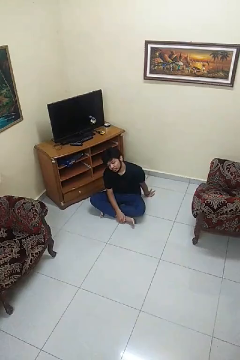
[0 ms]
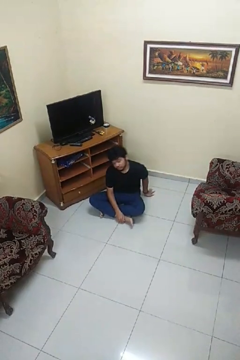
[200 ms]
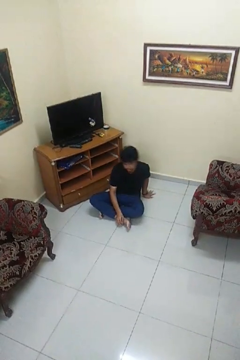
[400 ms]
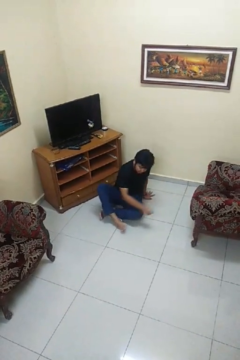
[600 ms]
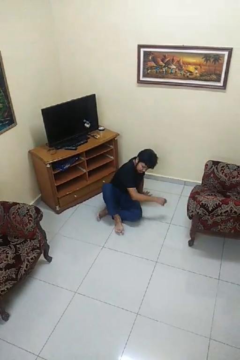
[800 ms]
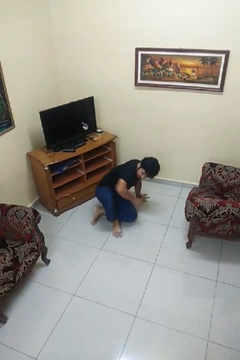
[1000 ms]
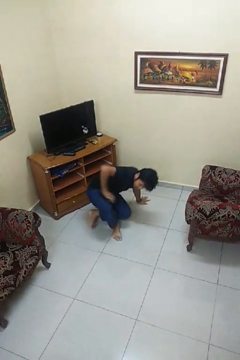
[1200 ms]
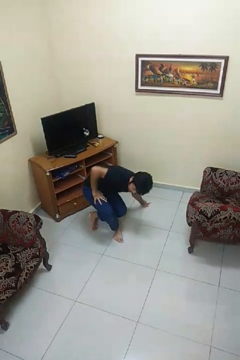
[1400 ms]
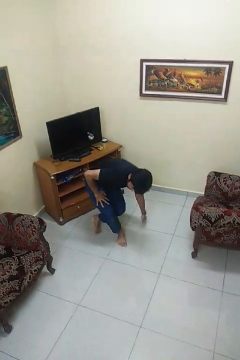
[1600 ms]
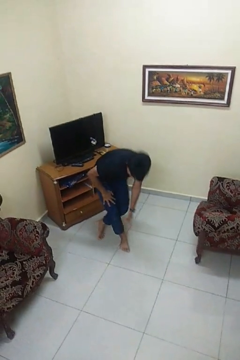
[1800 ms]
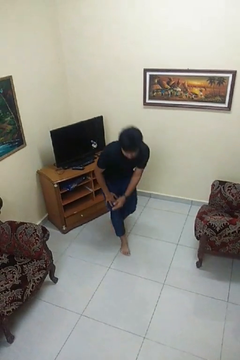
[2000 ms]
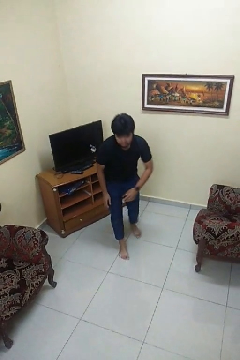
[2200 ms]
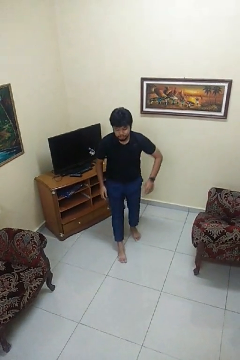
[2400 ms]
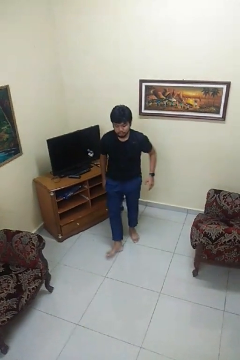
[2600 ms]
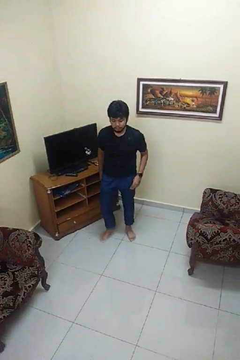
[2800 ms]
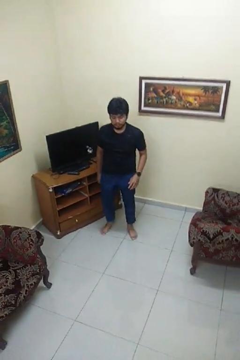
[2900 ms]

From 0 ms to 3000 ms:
person stands up from floor

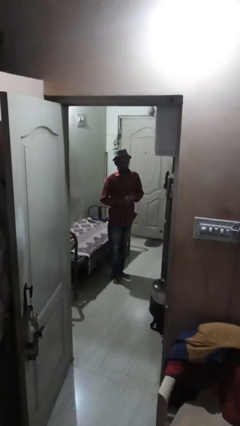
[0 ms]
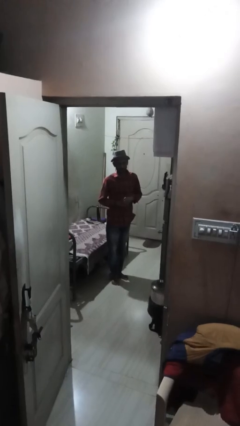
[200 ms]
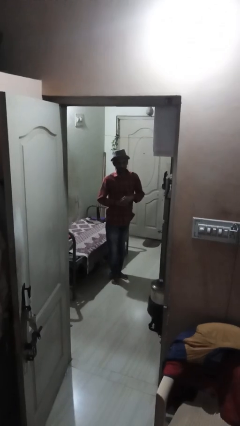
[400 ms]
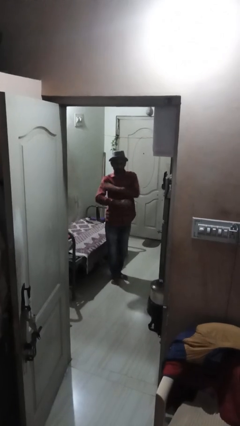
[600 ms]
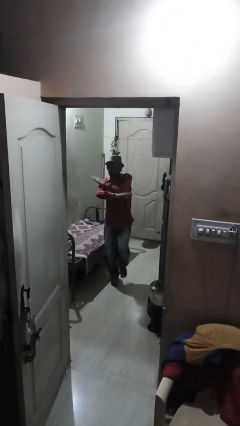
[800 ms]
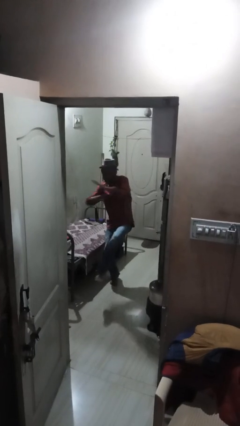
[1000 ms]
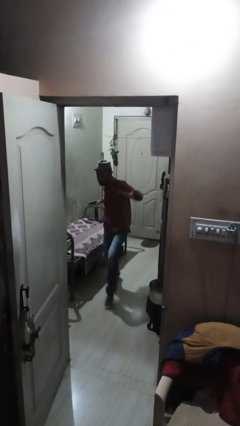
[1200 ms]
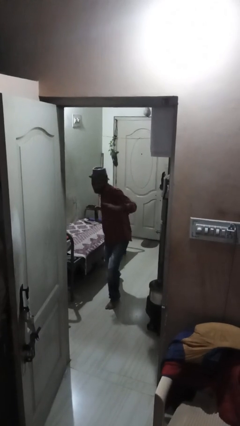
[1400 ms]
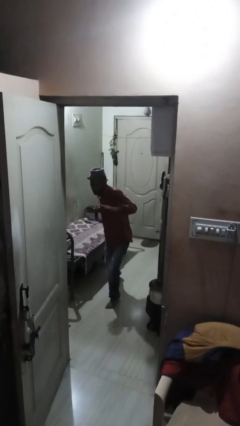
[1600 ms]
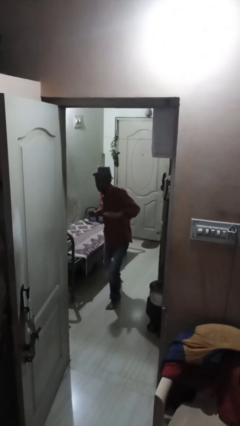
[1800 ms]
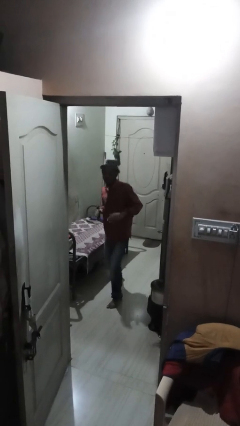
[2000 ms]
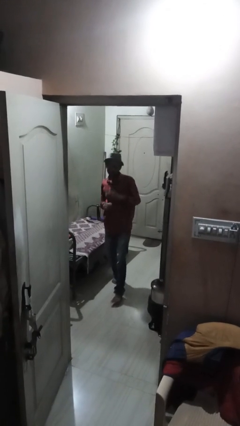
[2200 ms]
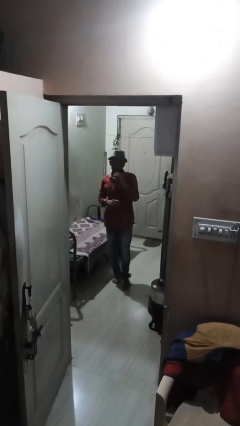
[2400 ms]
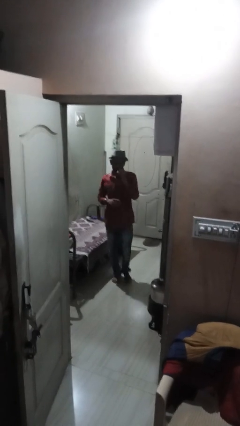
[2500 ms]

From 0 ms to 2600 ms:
person karate chop

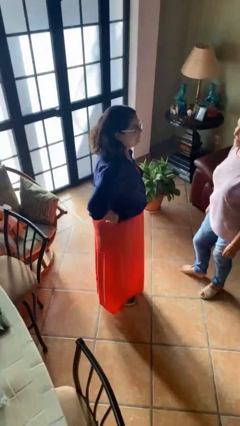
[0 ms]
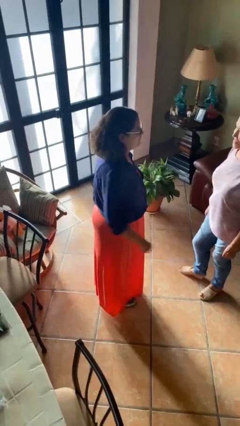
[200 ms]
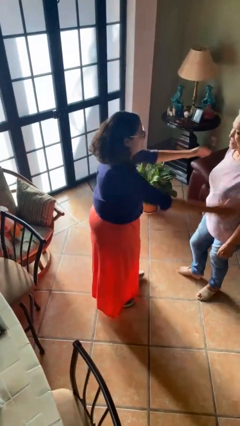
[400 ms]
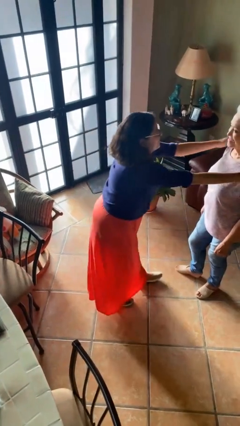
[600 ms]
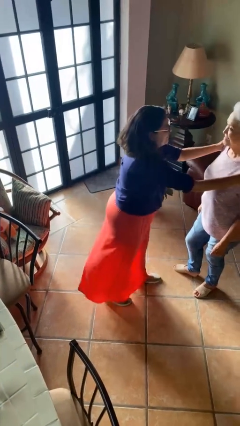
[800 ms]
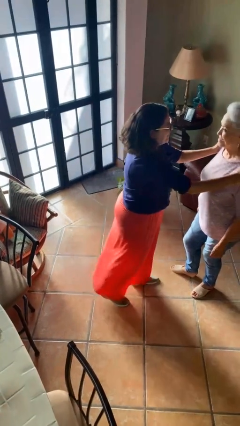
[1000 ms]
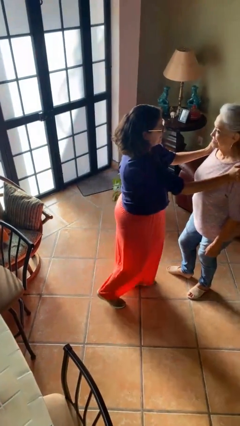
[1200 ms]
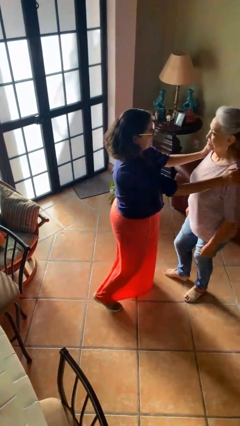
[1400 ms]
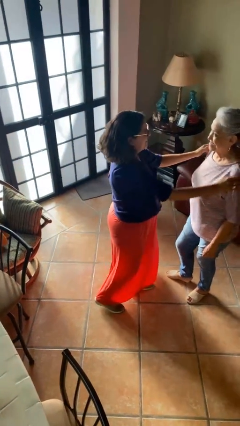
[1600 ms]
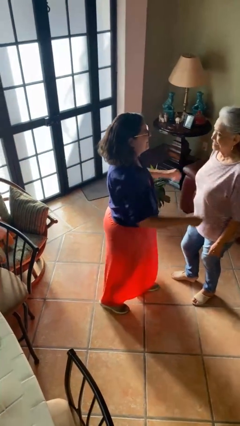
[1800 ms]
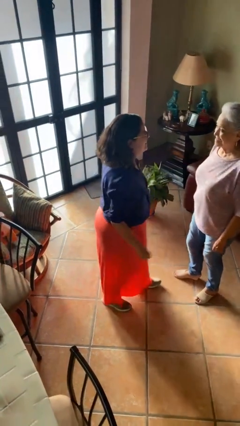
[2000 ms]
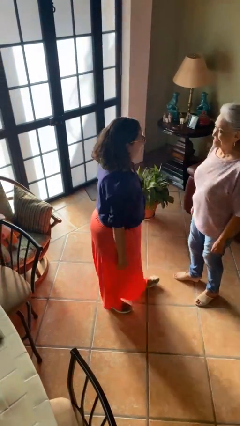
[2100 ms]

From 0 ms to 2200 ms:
person pounds shoulders of person

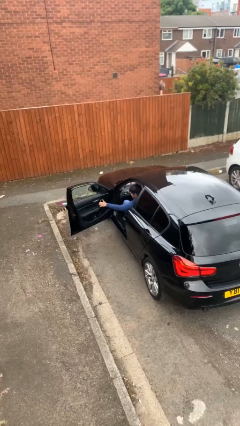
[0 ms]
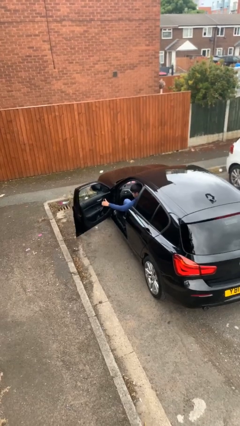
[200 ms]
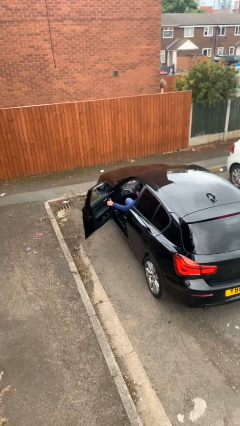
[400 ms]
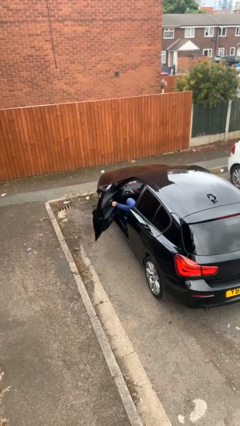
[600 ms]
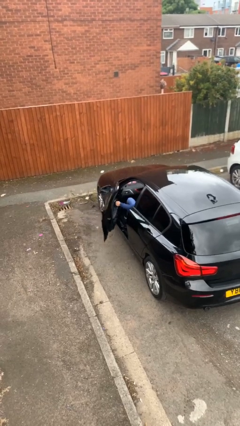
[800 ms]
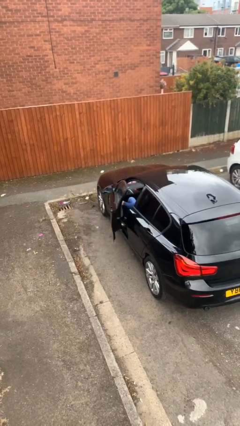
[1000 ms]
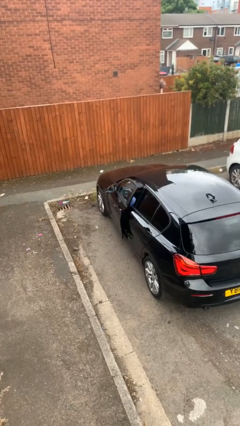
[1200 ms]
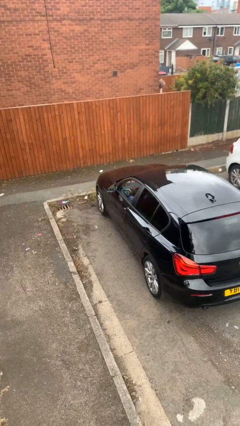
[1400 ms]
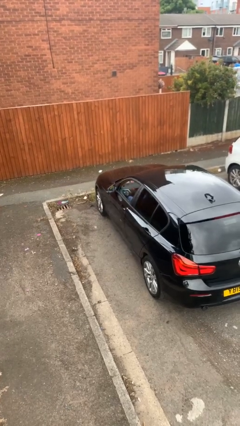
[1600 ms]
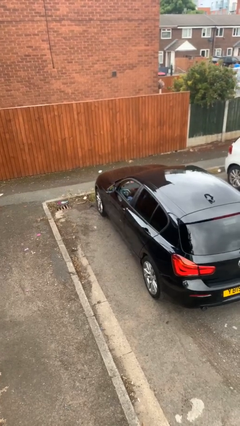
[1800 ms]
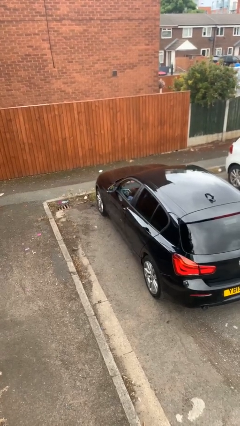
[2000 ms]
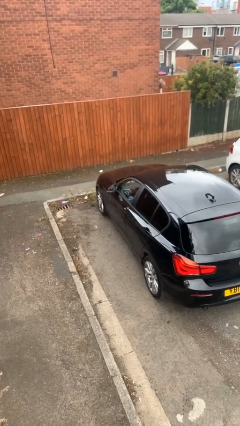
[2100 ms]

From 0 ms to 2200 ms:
person closes car door

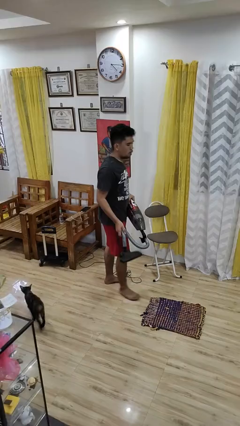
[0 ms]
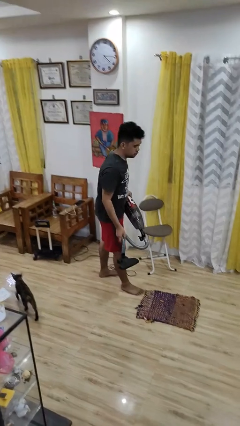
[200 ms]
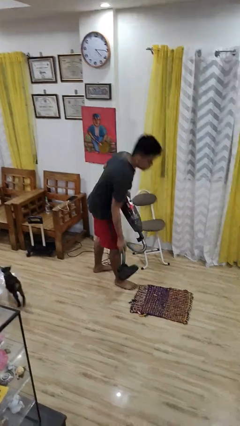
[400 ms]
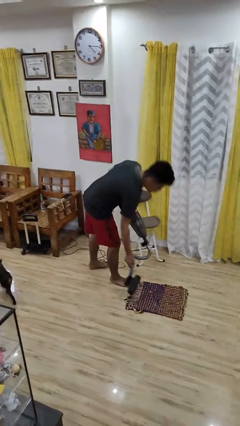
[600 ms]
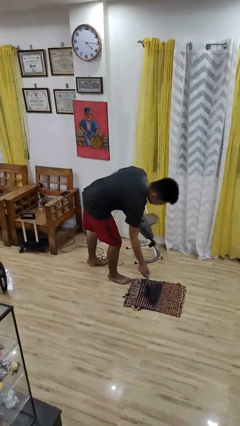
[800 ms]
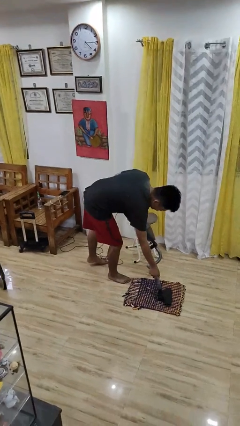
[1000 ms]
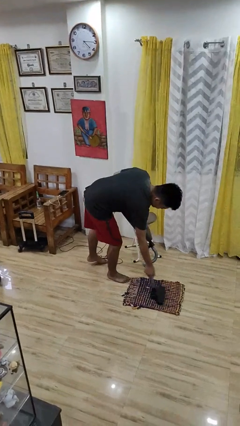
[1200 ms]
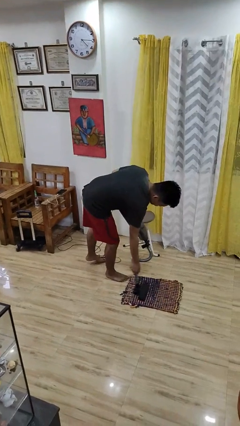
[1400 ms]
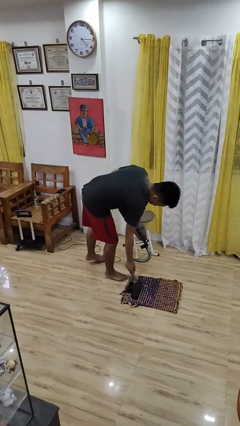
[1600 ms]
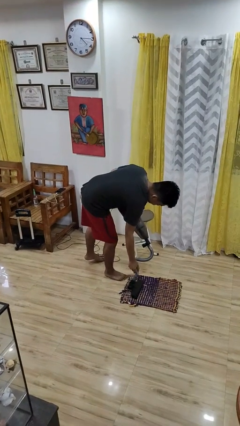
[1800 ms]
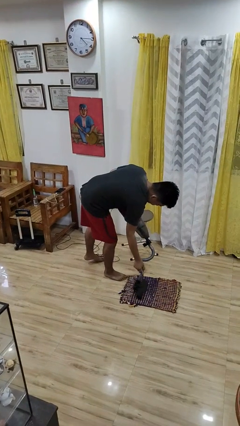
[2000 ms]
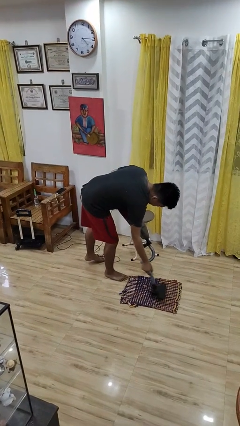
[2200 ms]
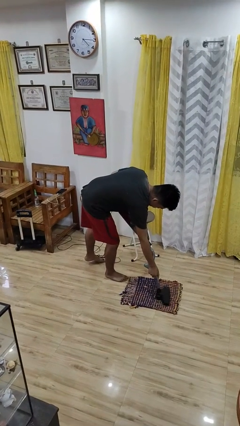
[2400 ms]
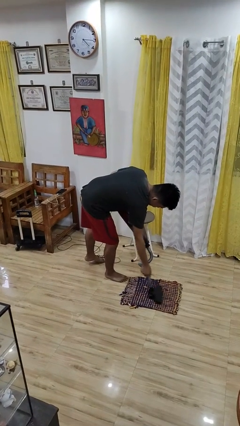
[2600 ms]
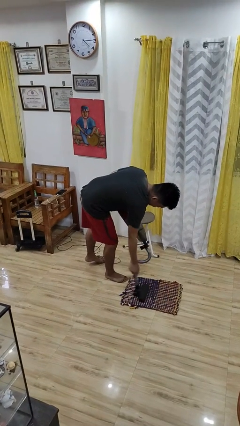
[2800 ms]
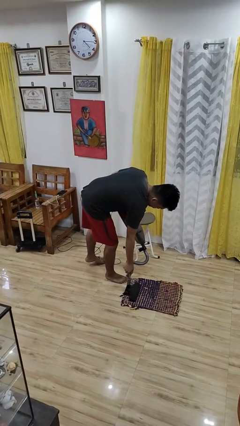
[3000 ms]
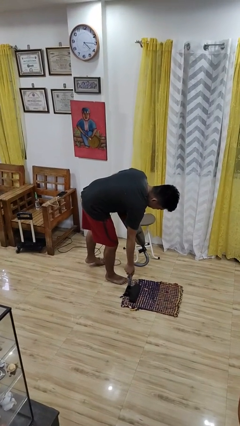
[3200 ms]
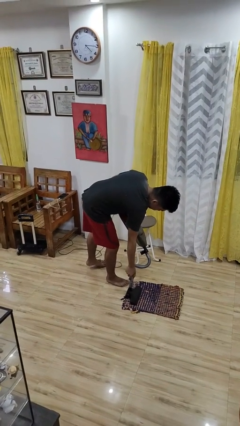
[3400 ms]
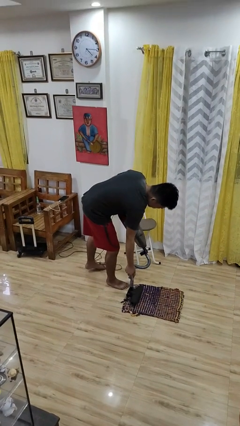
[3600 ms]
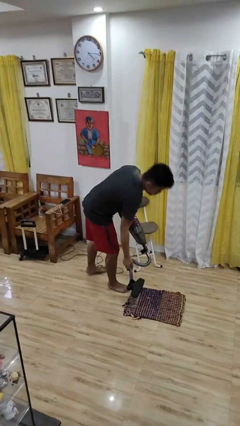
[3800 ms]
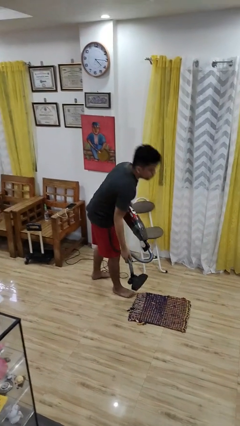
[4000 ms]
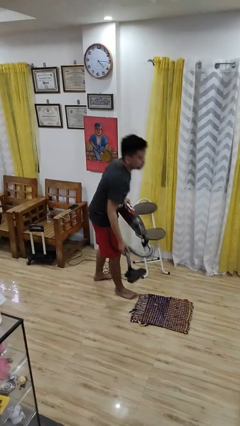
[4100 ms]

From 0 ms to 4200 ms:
person vacuums carpet

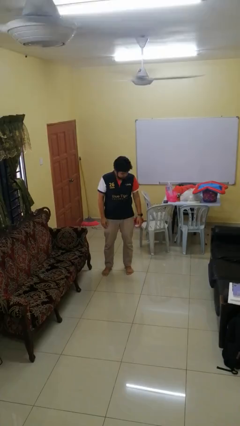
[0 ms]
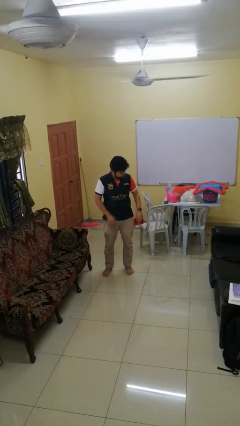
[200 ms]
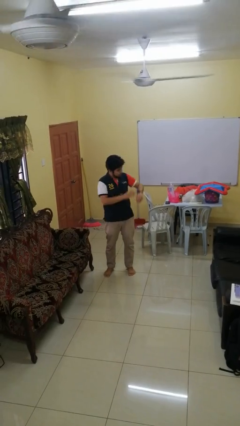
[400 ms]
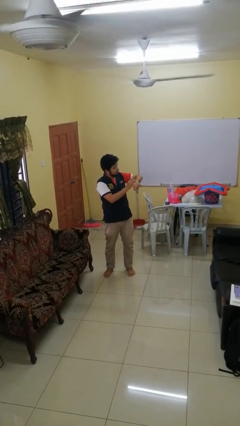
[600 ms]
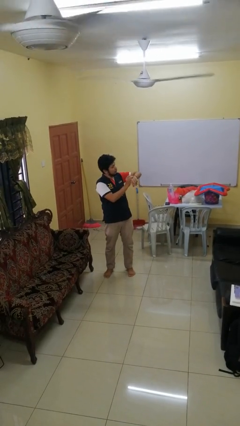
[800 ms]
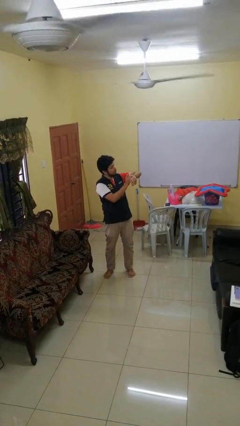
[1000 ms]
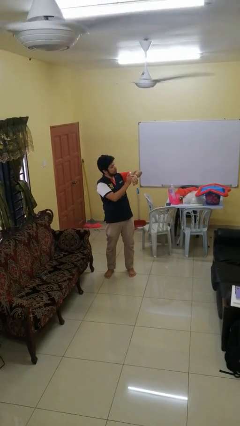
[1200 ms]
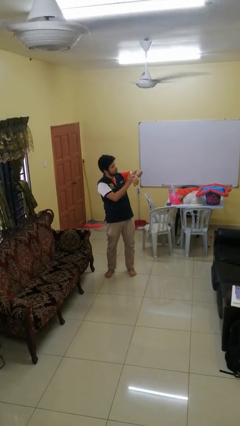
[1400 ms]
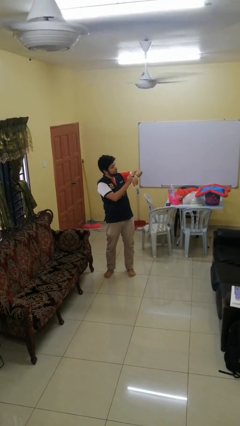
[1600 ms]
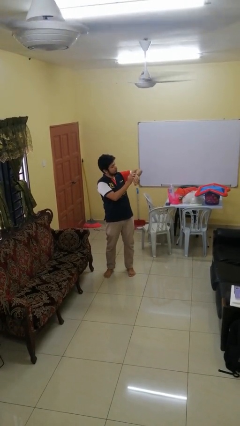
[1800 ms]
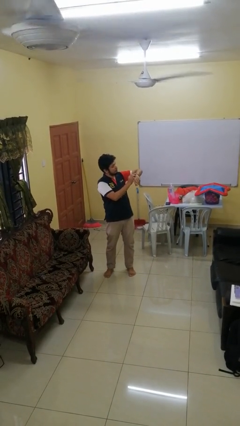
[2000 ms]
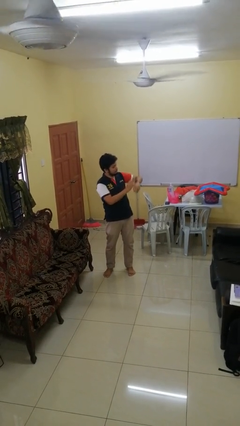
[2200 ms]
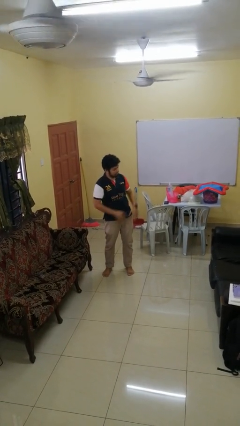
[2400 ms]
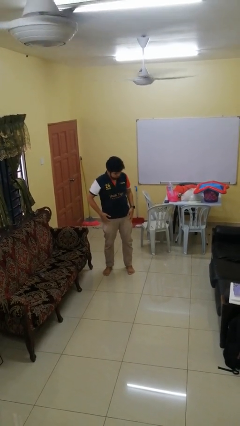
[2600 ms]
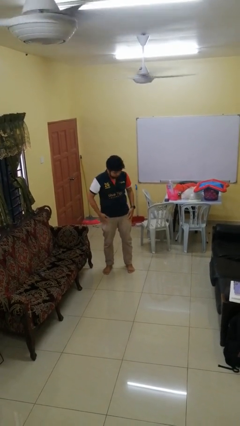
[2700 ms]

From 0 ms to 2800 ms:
person looks at wristwatch

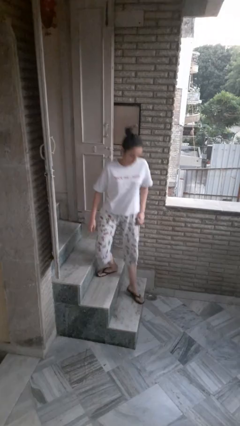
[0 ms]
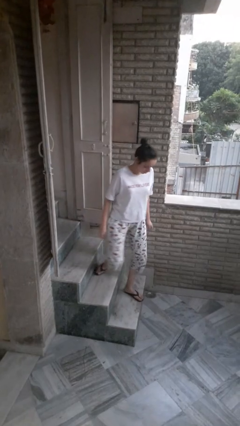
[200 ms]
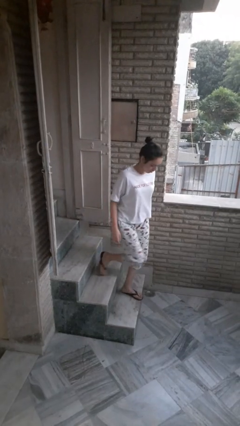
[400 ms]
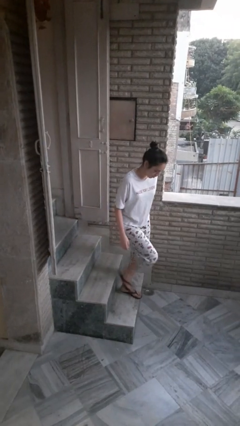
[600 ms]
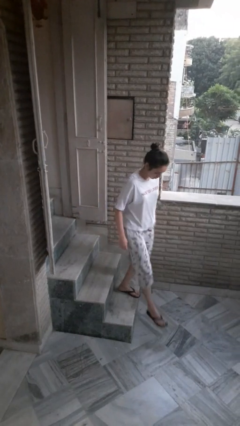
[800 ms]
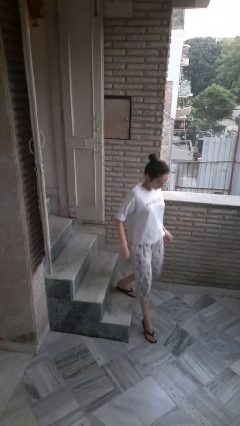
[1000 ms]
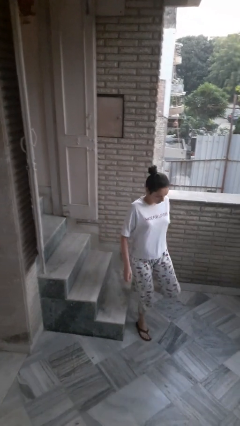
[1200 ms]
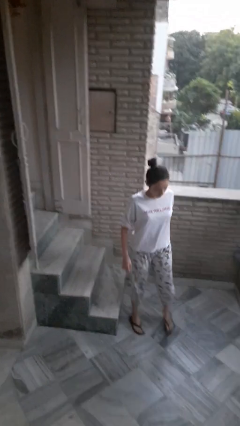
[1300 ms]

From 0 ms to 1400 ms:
person climbs down stairs
